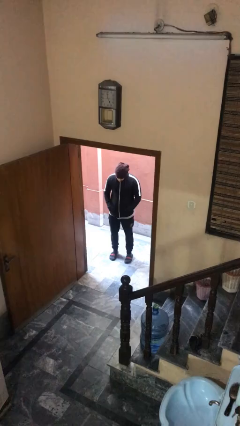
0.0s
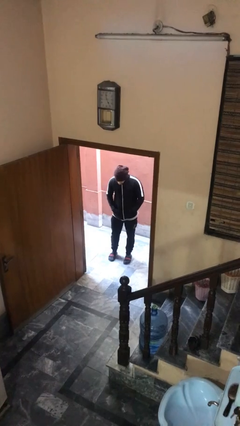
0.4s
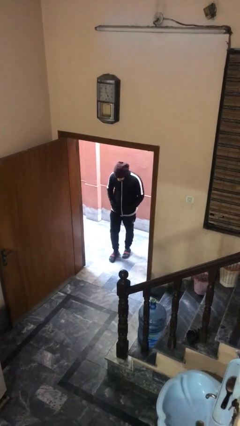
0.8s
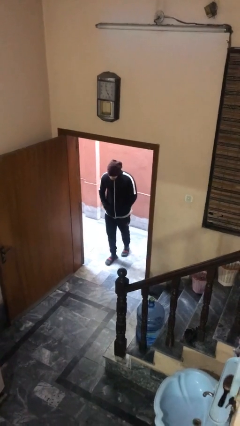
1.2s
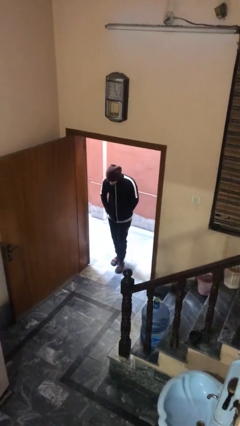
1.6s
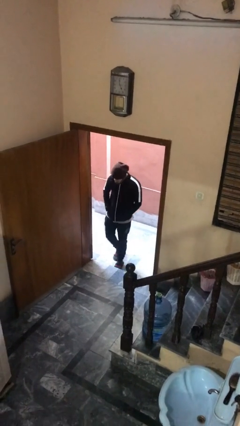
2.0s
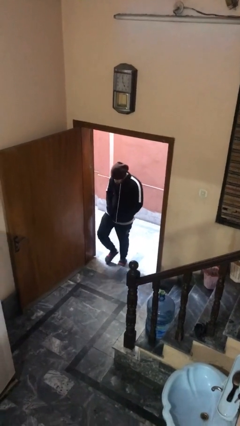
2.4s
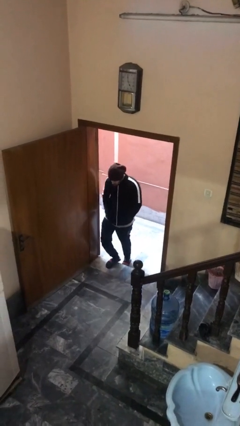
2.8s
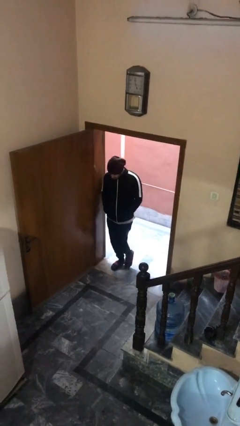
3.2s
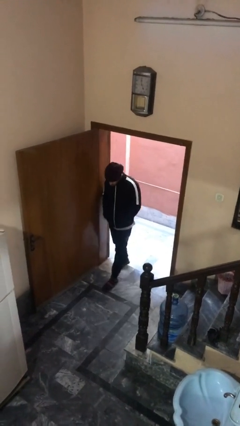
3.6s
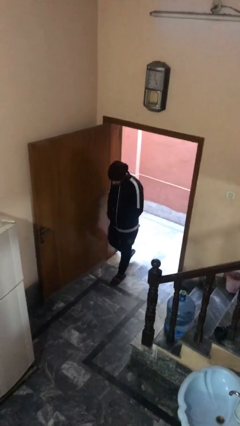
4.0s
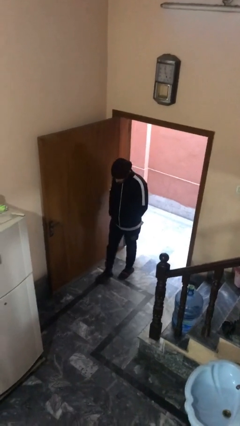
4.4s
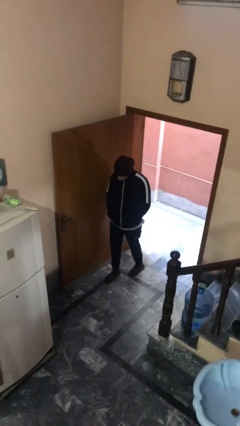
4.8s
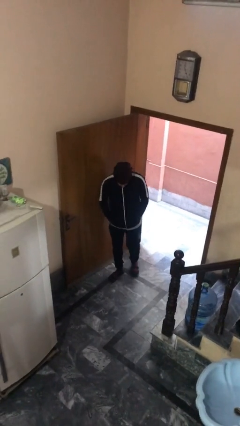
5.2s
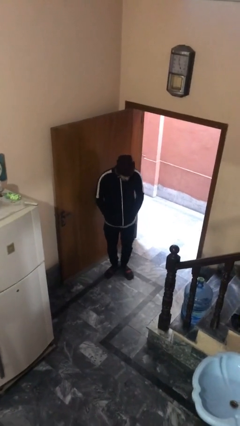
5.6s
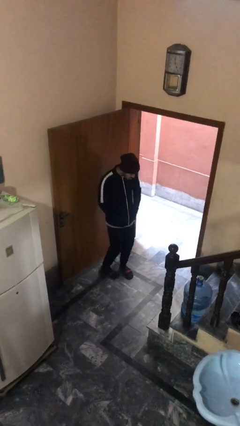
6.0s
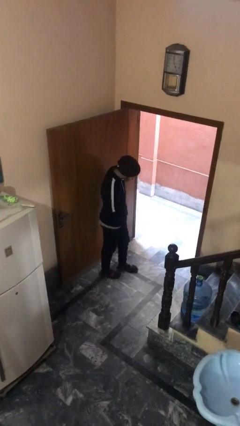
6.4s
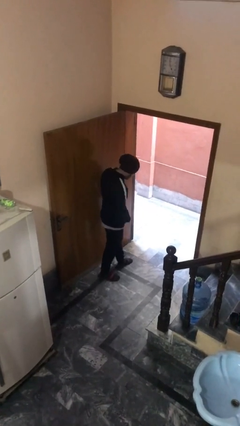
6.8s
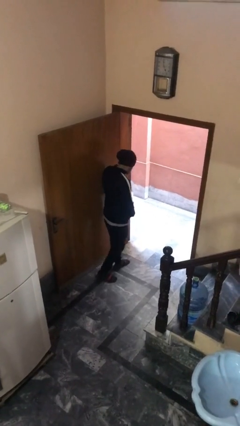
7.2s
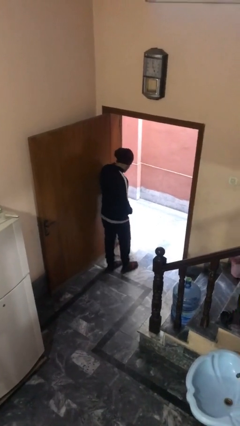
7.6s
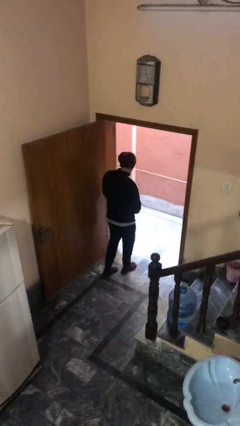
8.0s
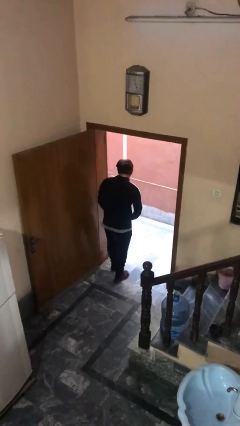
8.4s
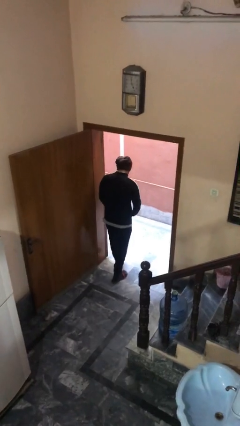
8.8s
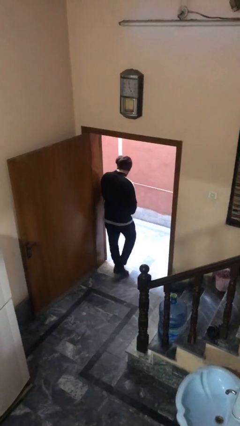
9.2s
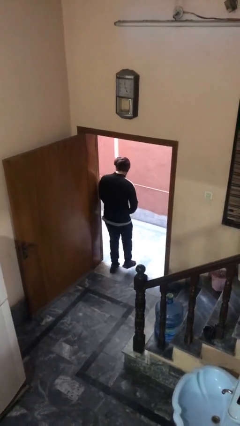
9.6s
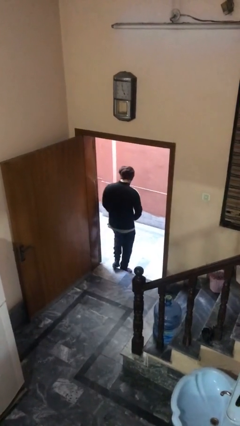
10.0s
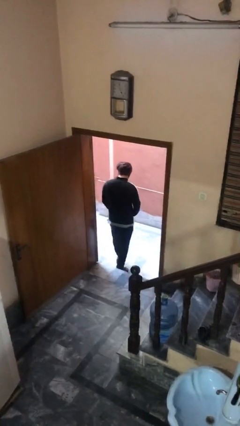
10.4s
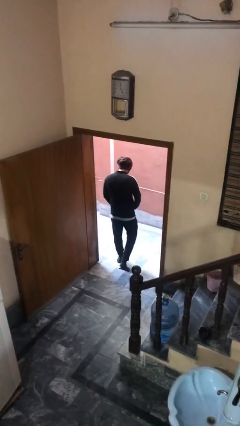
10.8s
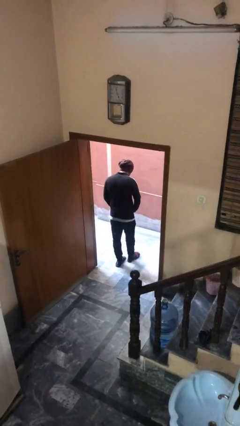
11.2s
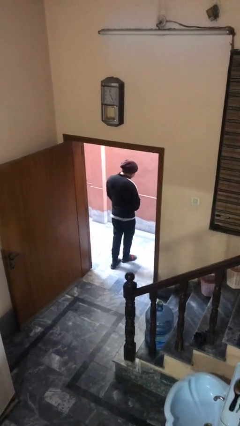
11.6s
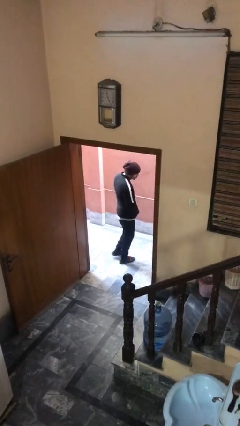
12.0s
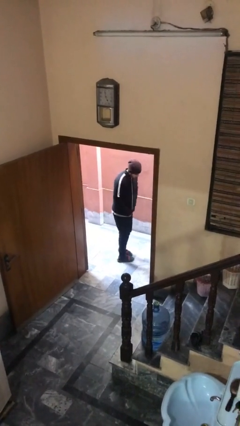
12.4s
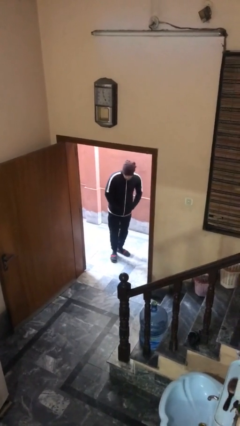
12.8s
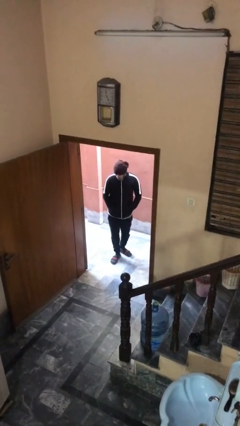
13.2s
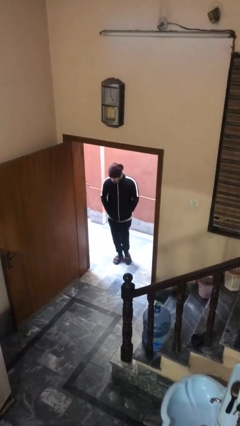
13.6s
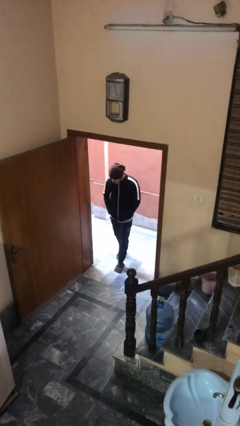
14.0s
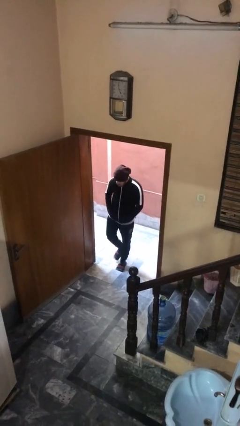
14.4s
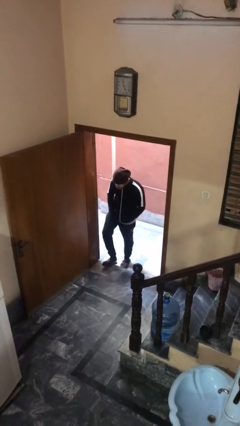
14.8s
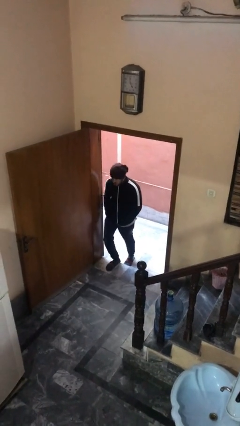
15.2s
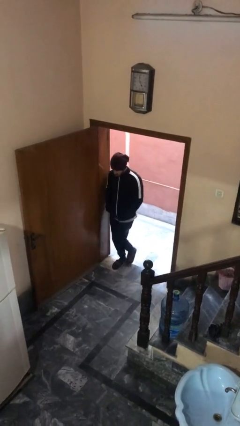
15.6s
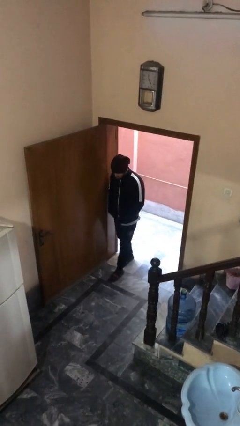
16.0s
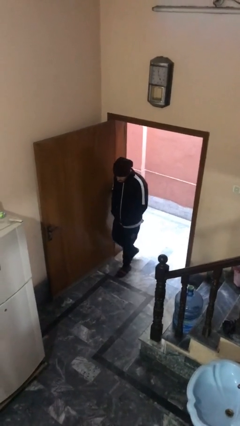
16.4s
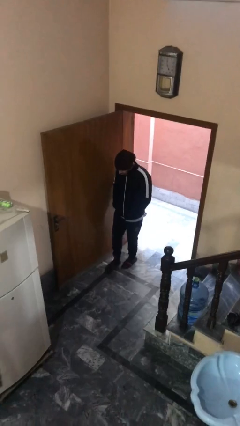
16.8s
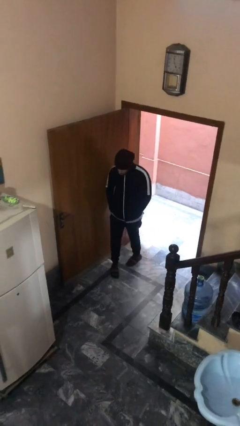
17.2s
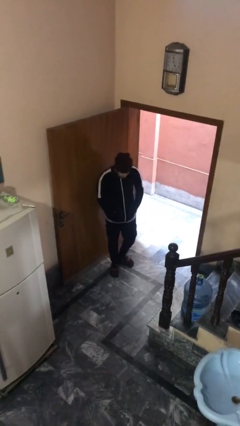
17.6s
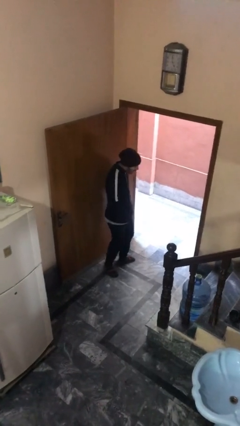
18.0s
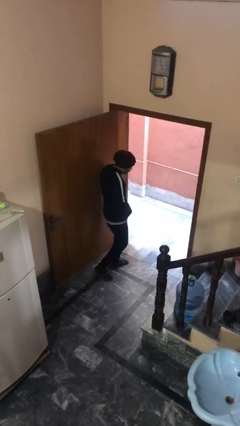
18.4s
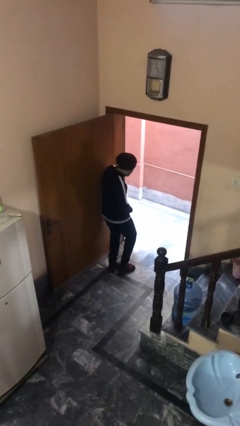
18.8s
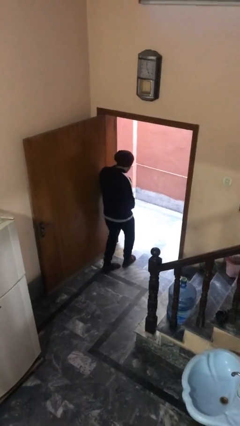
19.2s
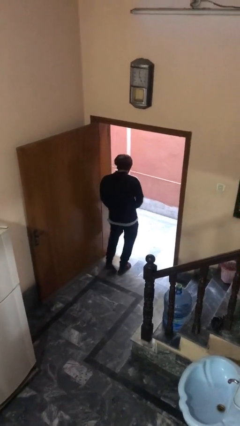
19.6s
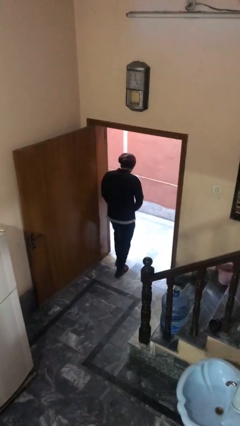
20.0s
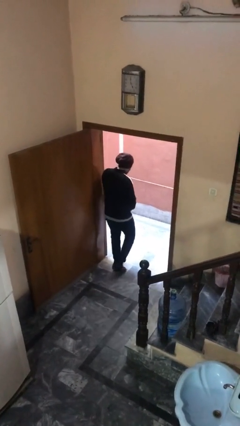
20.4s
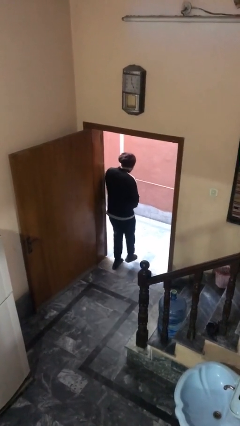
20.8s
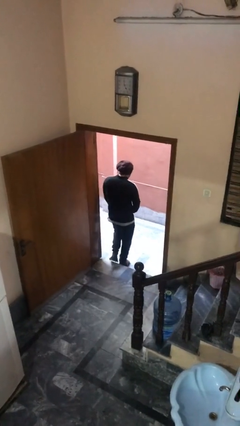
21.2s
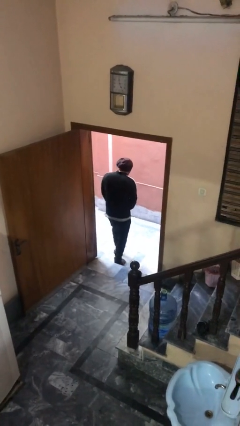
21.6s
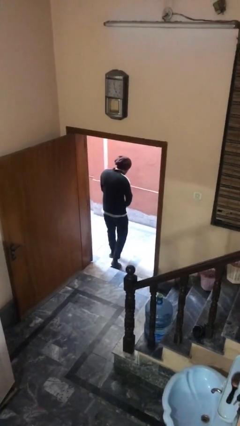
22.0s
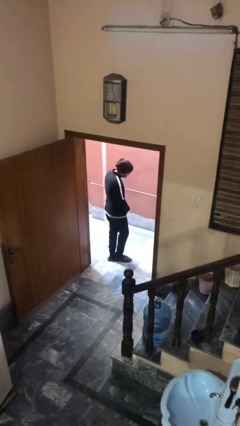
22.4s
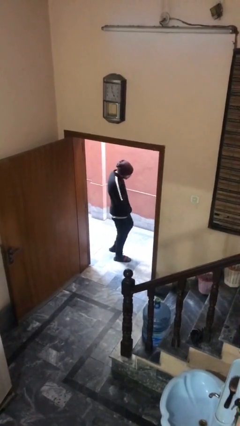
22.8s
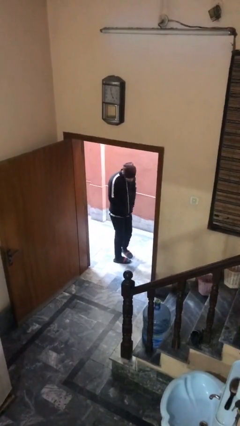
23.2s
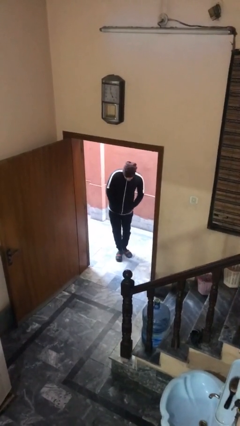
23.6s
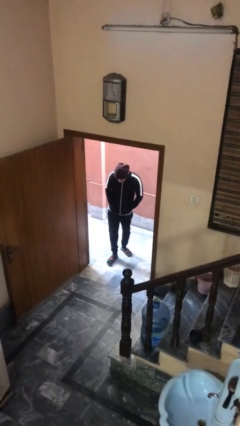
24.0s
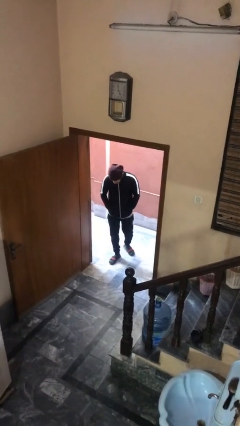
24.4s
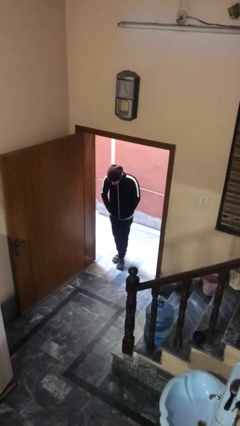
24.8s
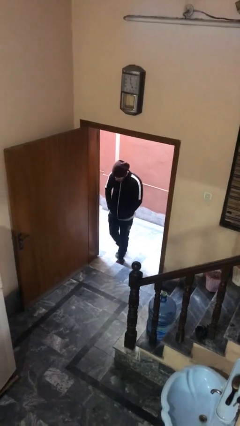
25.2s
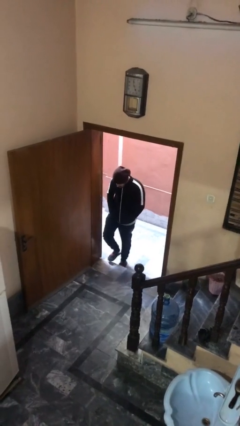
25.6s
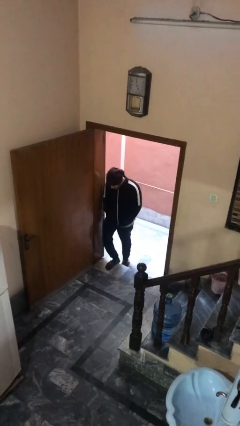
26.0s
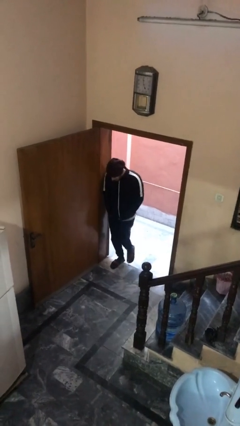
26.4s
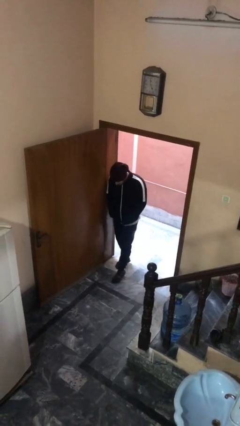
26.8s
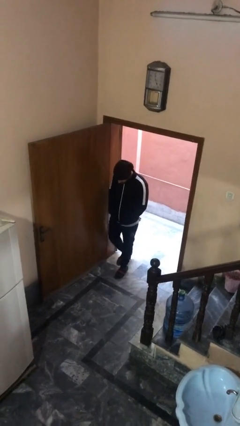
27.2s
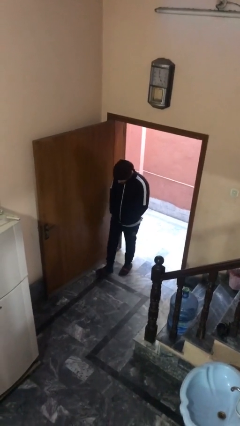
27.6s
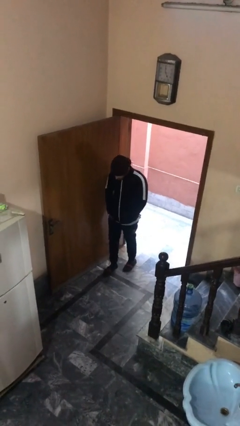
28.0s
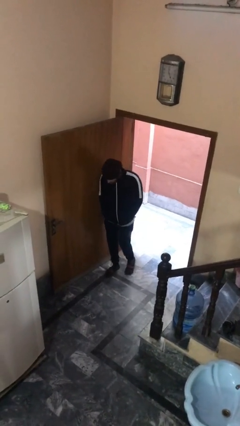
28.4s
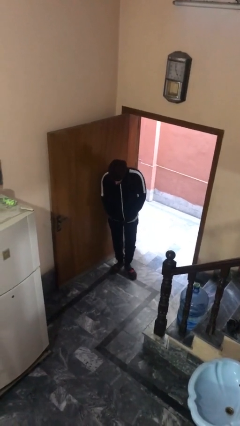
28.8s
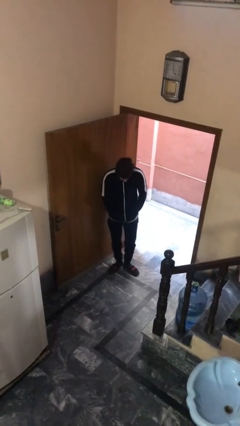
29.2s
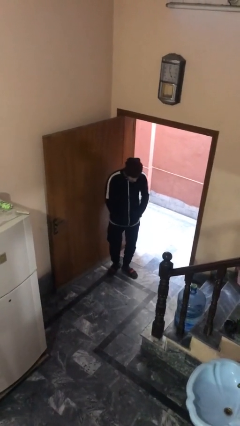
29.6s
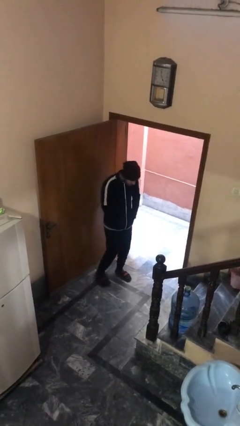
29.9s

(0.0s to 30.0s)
person walks

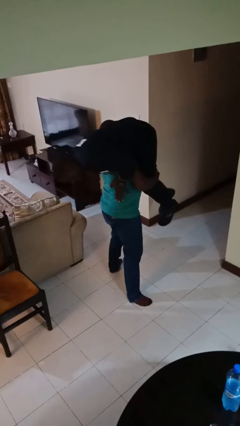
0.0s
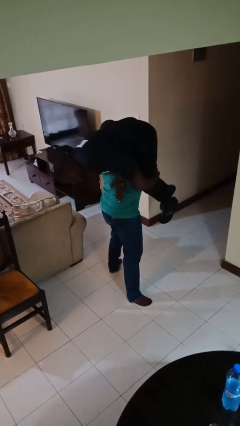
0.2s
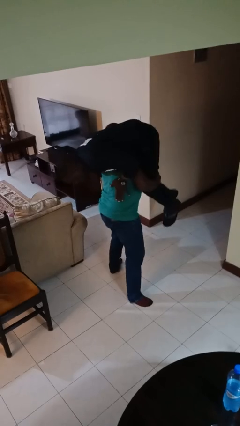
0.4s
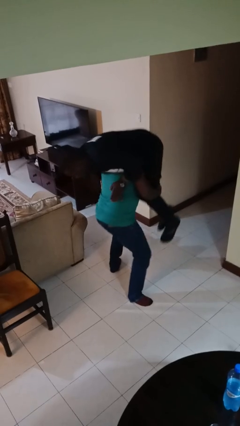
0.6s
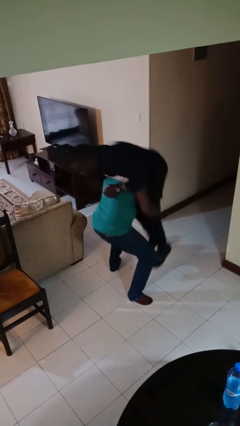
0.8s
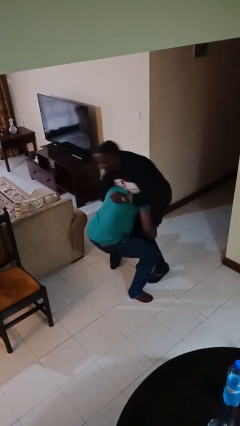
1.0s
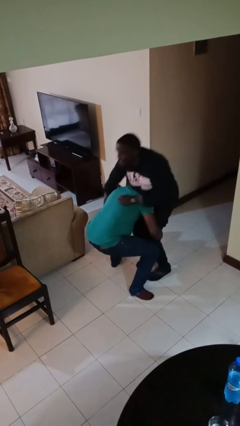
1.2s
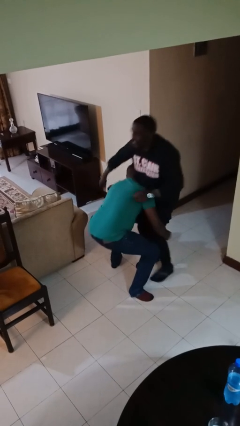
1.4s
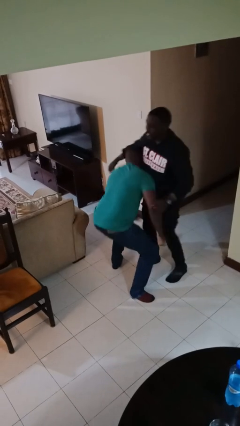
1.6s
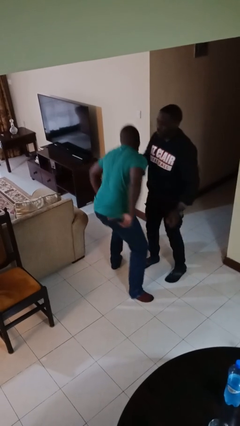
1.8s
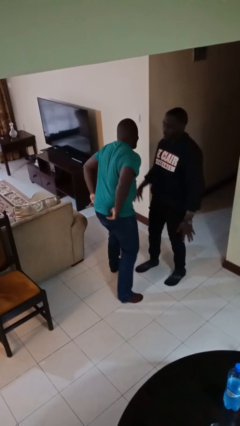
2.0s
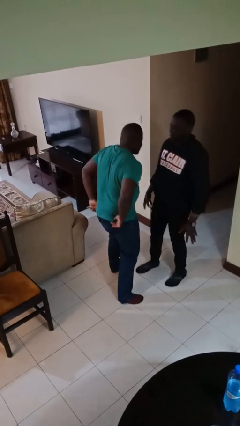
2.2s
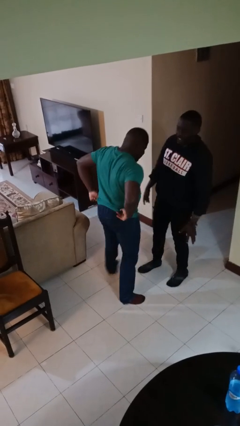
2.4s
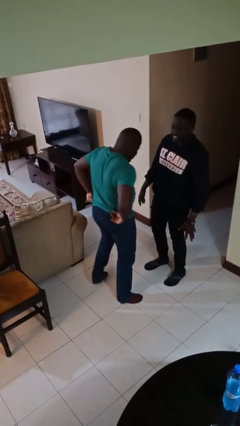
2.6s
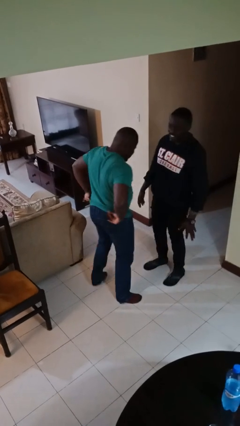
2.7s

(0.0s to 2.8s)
person puts down person

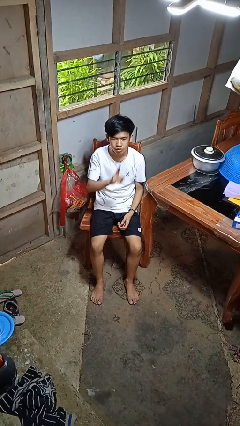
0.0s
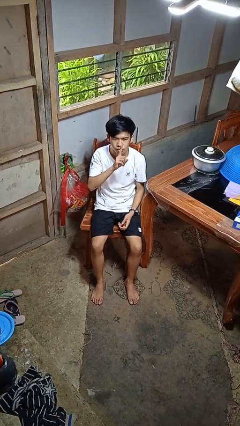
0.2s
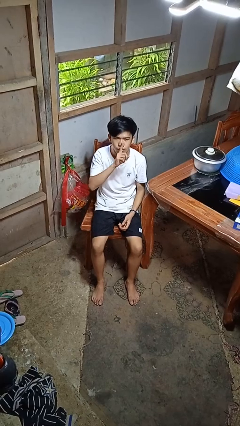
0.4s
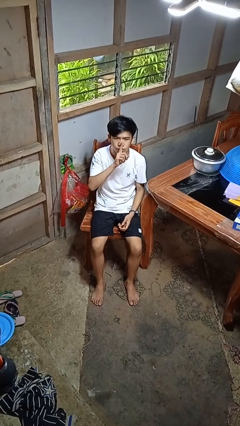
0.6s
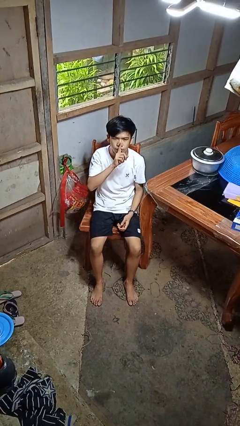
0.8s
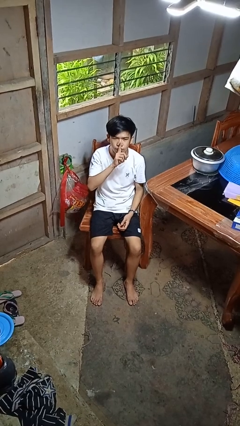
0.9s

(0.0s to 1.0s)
person gestures be quiet
